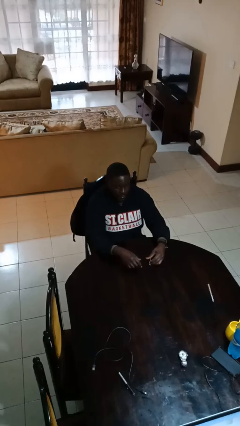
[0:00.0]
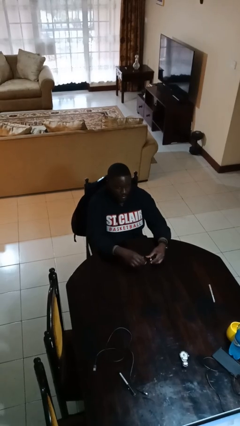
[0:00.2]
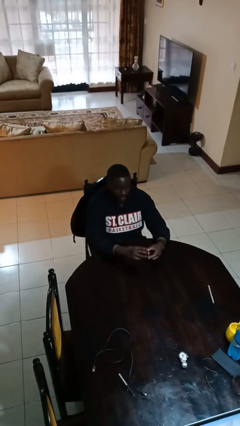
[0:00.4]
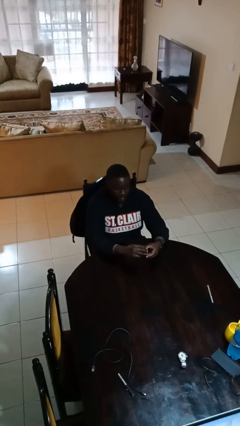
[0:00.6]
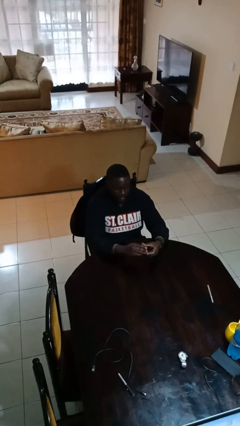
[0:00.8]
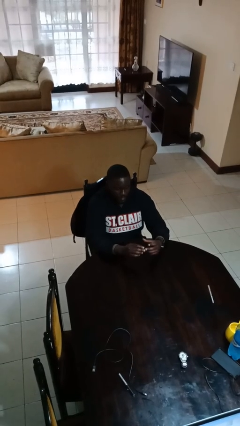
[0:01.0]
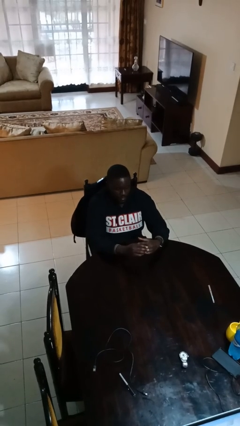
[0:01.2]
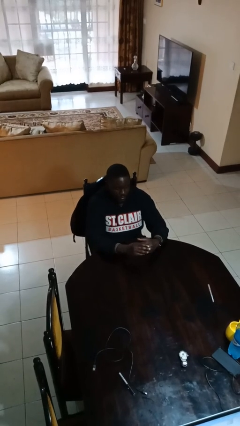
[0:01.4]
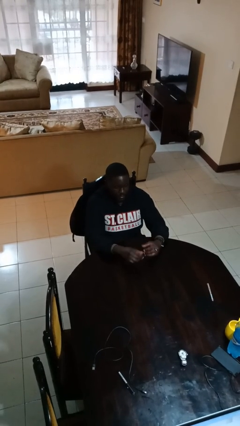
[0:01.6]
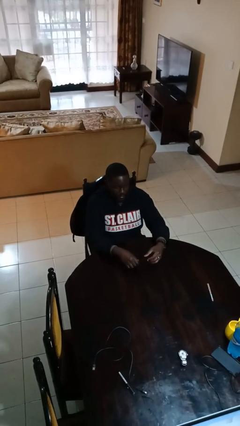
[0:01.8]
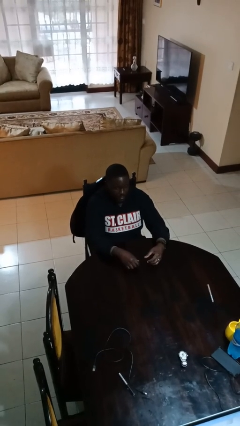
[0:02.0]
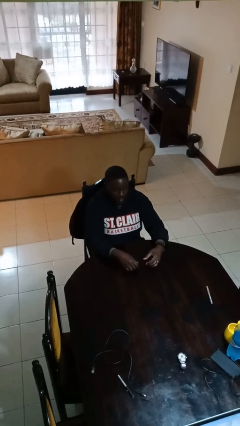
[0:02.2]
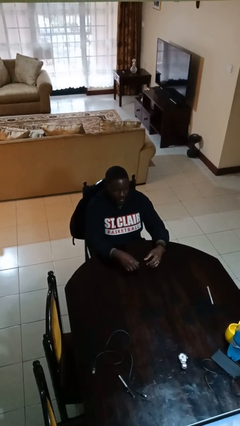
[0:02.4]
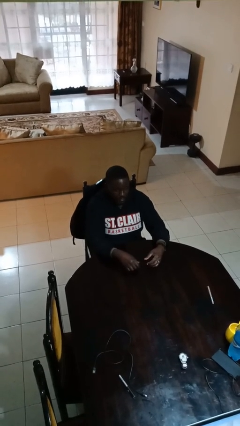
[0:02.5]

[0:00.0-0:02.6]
person puts on ring

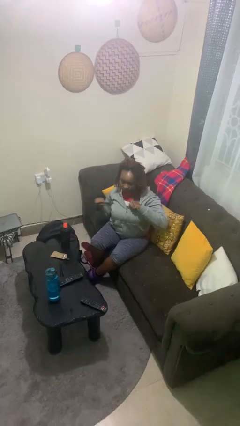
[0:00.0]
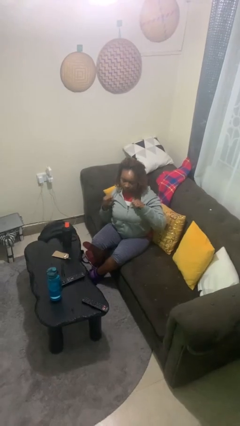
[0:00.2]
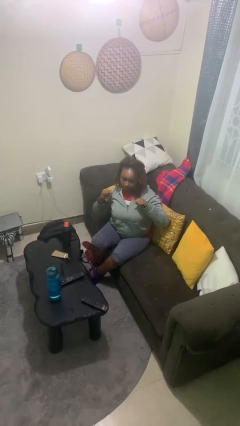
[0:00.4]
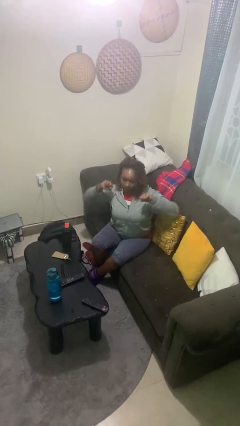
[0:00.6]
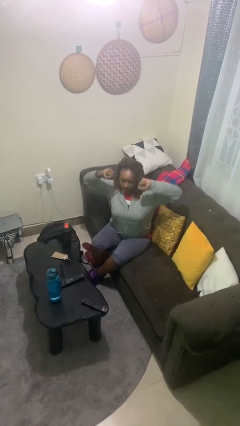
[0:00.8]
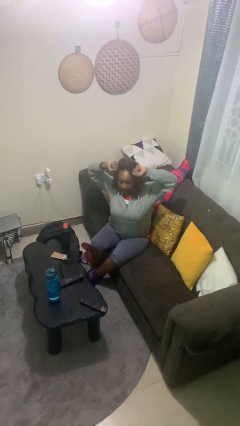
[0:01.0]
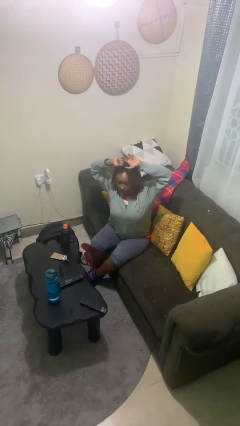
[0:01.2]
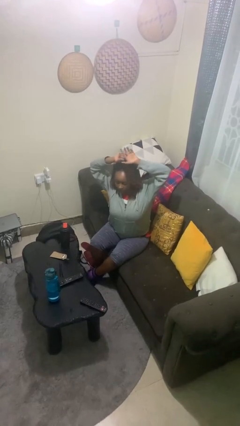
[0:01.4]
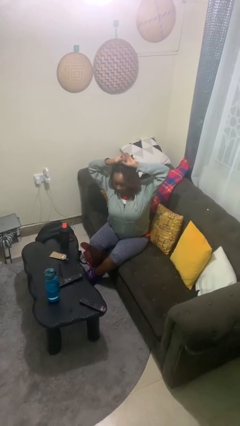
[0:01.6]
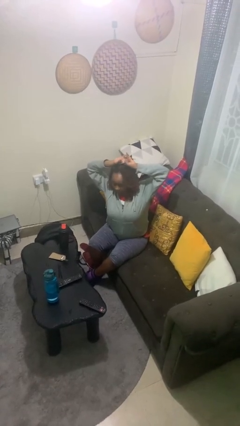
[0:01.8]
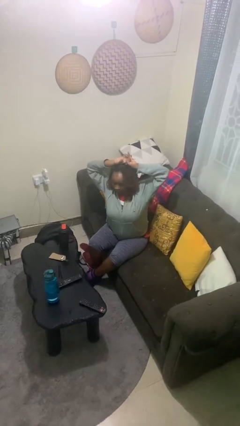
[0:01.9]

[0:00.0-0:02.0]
person stretches arms over head

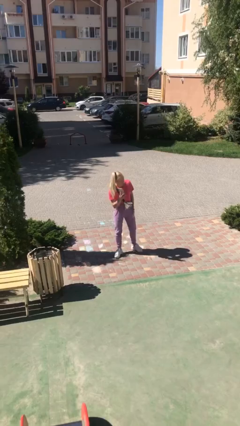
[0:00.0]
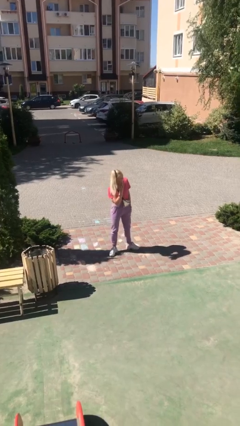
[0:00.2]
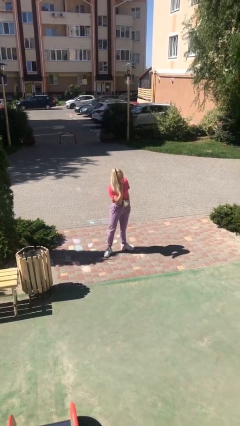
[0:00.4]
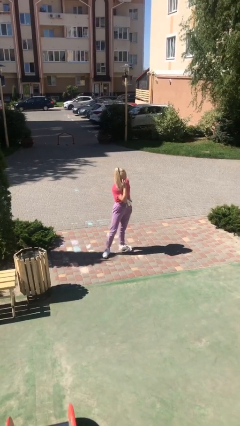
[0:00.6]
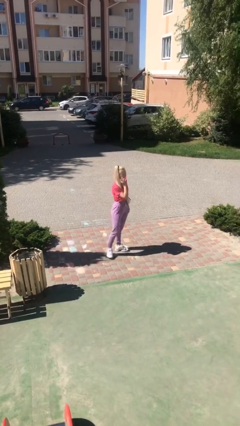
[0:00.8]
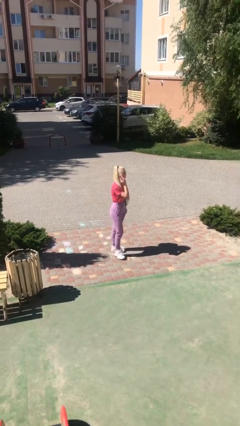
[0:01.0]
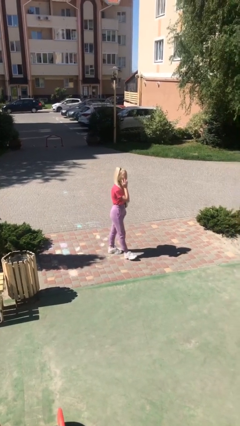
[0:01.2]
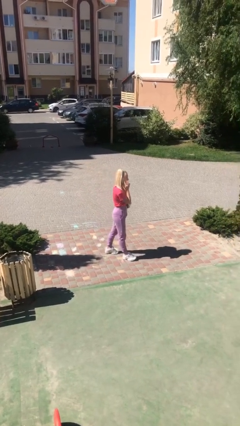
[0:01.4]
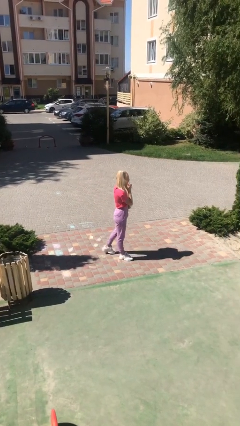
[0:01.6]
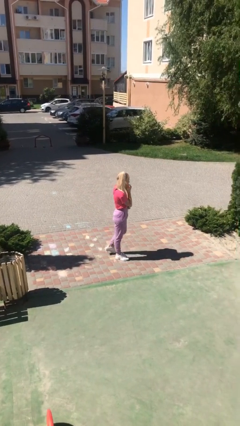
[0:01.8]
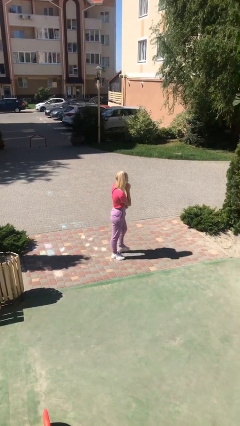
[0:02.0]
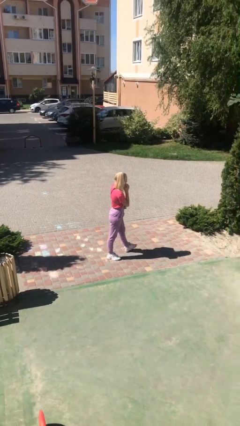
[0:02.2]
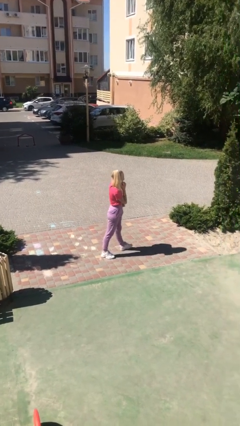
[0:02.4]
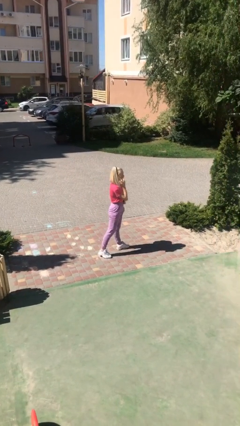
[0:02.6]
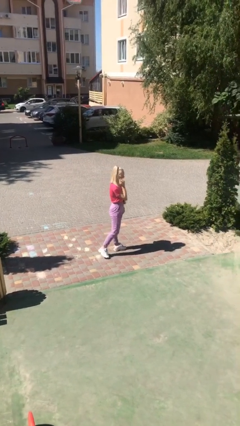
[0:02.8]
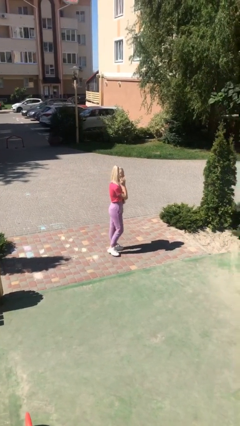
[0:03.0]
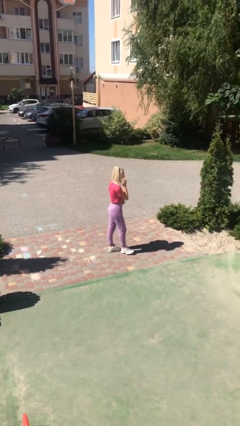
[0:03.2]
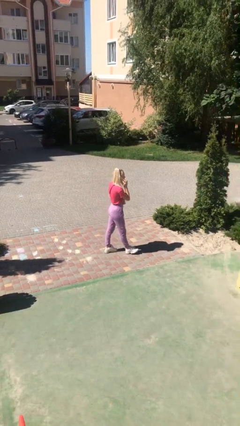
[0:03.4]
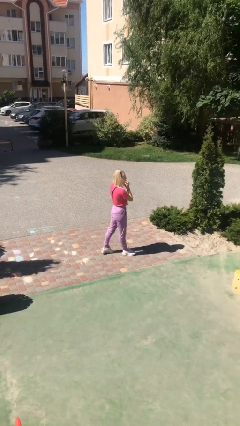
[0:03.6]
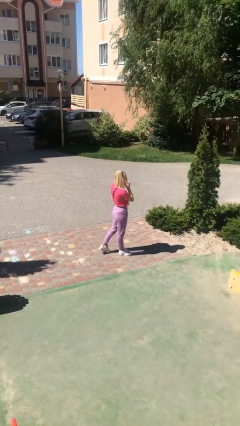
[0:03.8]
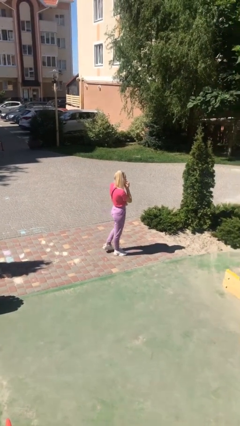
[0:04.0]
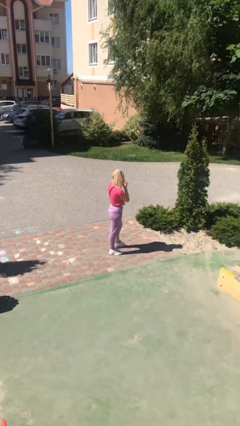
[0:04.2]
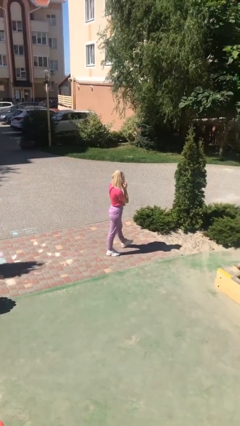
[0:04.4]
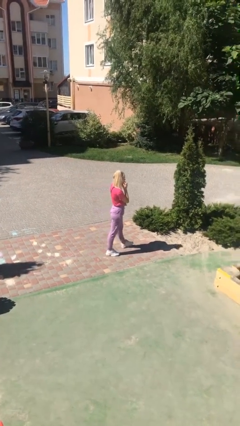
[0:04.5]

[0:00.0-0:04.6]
person talks on phone

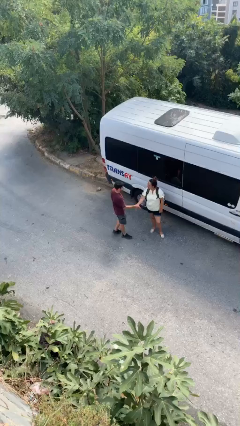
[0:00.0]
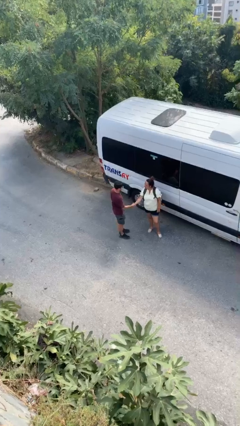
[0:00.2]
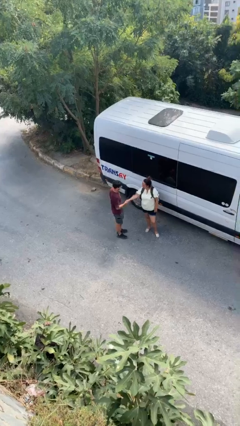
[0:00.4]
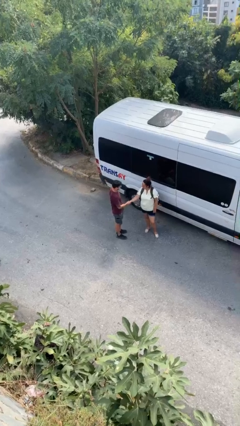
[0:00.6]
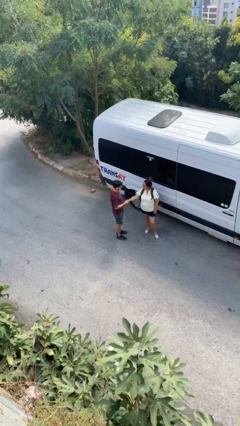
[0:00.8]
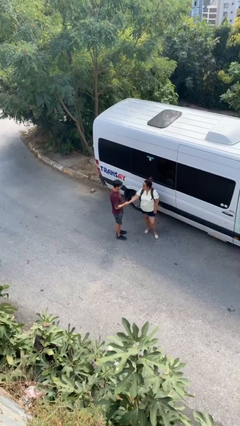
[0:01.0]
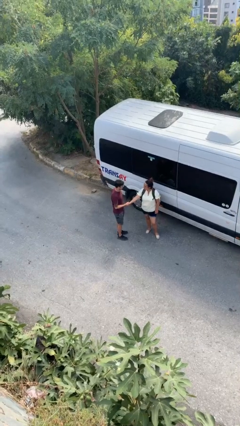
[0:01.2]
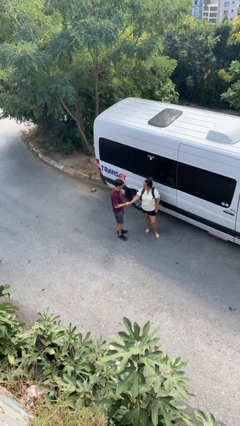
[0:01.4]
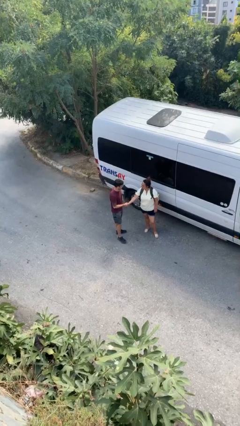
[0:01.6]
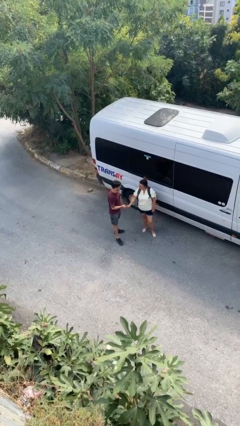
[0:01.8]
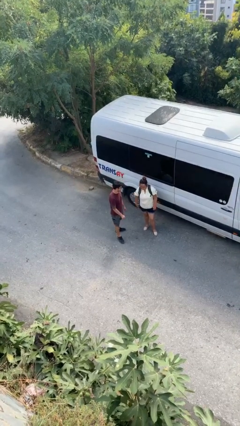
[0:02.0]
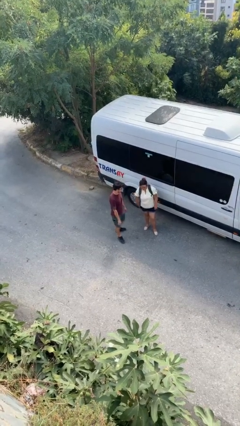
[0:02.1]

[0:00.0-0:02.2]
person shakes hand

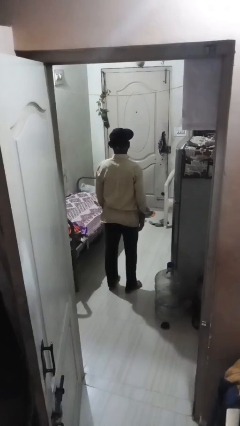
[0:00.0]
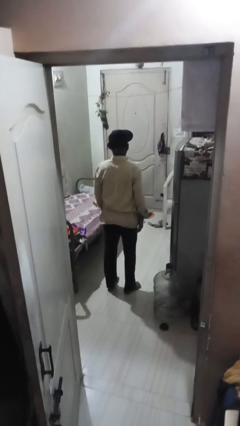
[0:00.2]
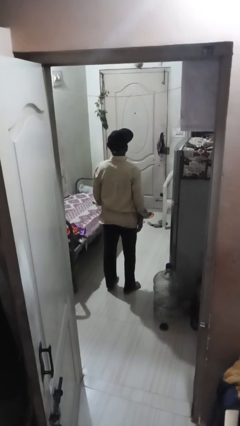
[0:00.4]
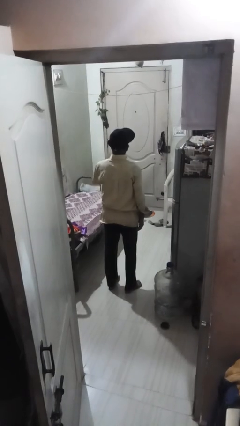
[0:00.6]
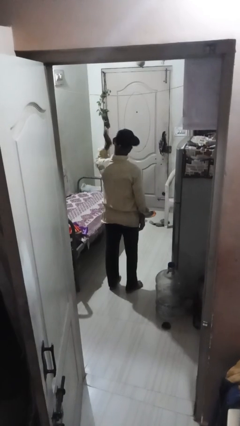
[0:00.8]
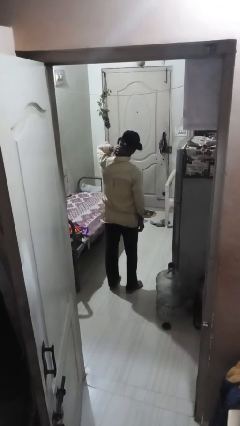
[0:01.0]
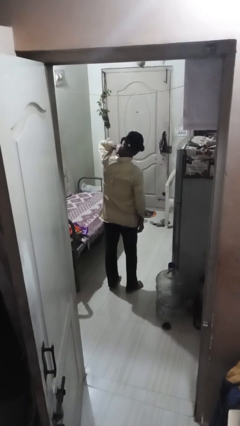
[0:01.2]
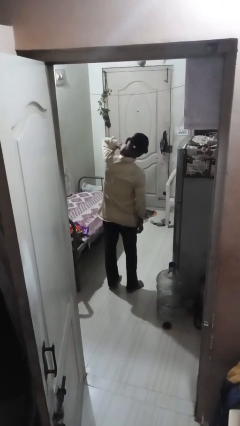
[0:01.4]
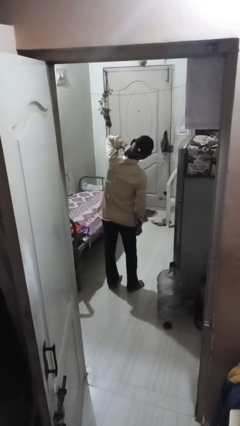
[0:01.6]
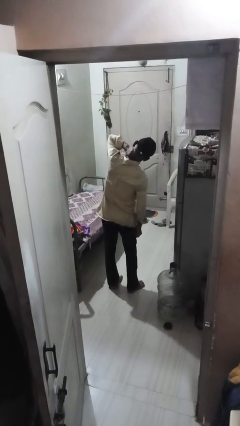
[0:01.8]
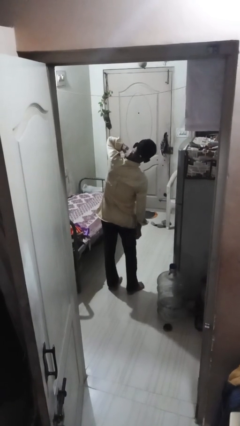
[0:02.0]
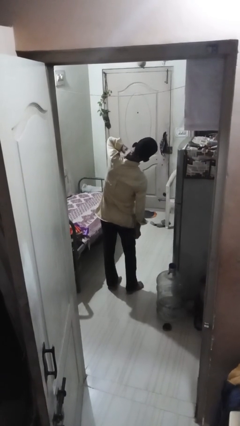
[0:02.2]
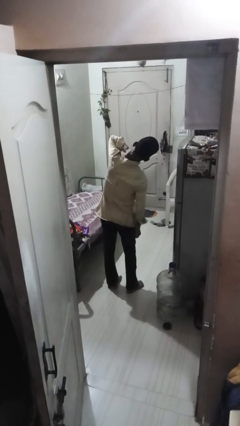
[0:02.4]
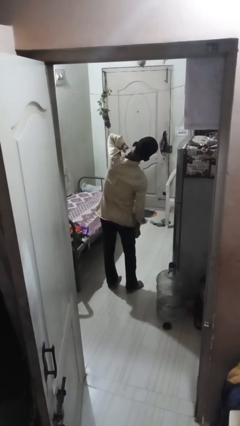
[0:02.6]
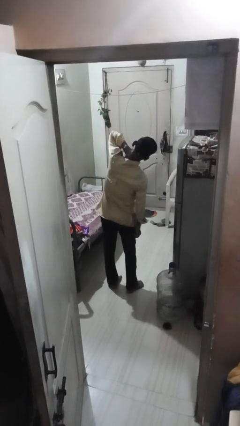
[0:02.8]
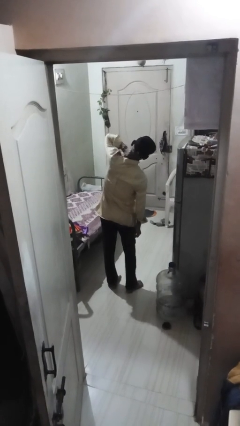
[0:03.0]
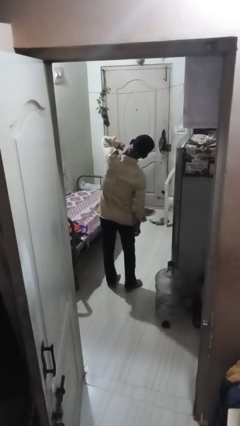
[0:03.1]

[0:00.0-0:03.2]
person rubs neck

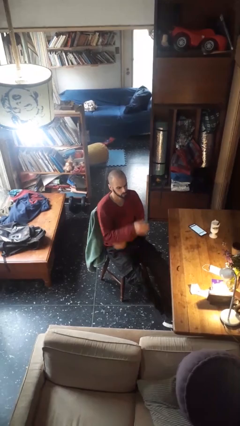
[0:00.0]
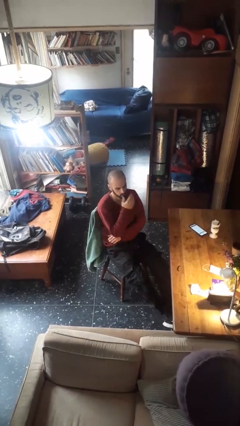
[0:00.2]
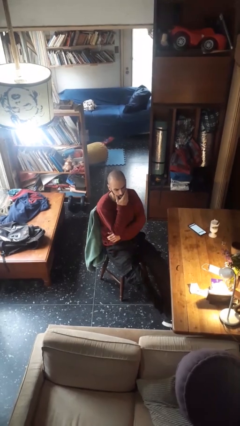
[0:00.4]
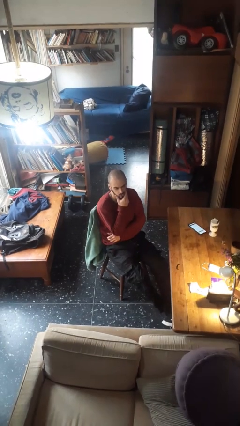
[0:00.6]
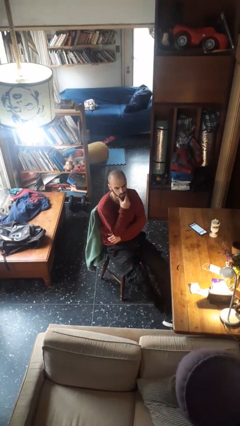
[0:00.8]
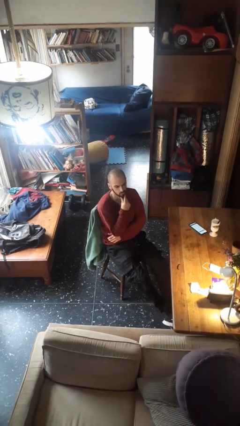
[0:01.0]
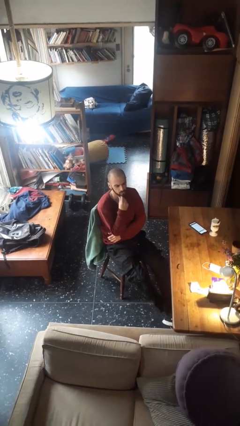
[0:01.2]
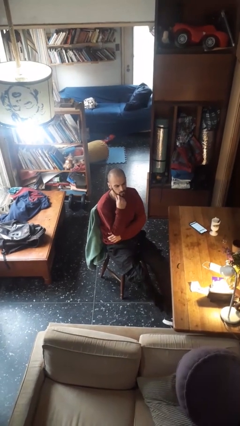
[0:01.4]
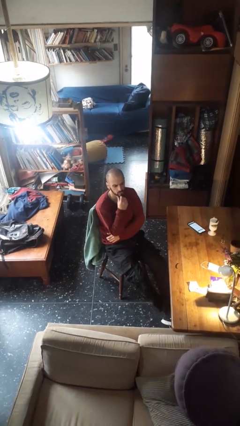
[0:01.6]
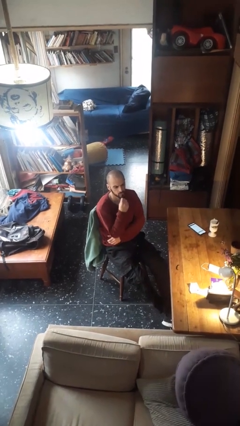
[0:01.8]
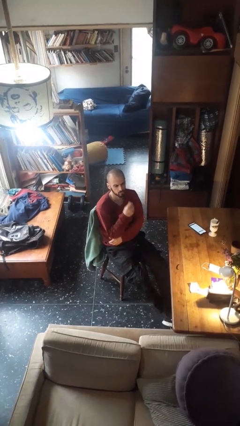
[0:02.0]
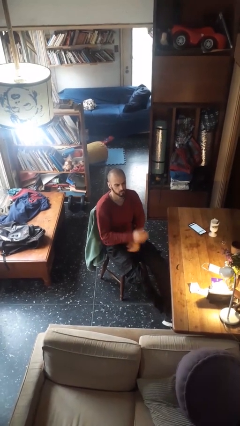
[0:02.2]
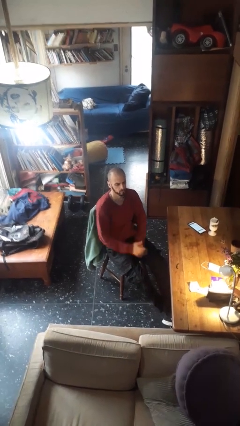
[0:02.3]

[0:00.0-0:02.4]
person strokes chin

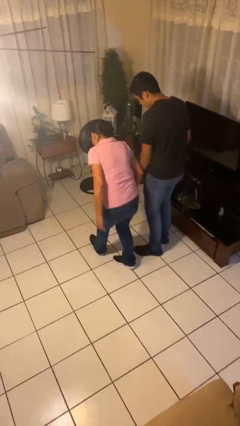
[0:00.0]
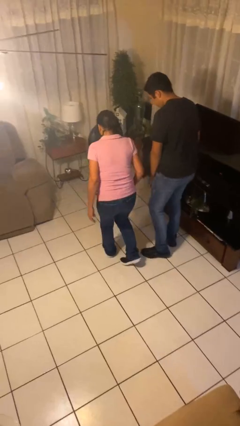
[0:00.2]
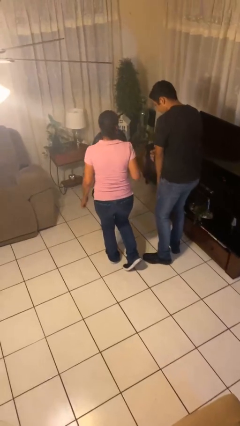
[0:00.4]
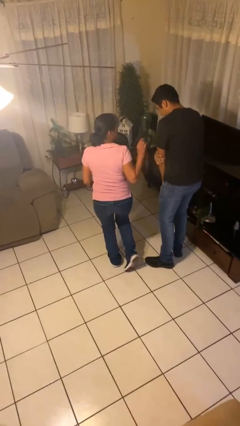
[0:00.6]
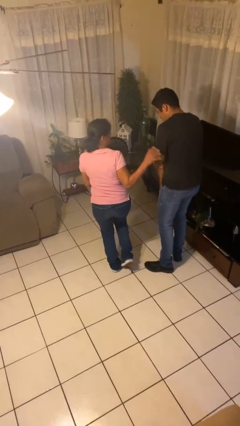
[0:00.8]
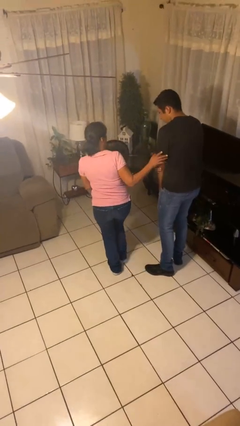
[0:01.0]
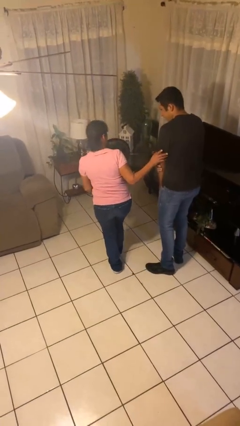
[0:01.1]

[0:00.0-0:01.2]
person bumps into person
